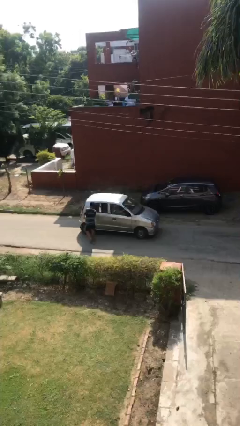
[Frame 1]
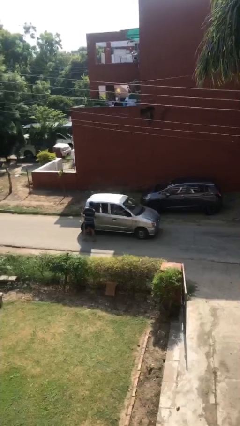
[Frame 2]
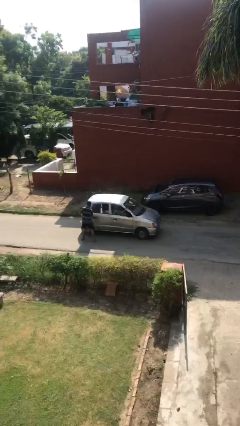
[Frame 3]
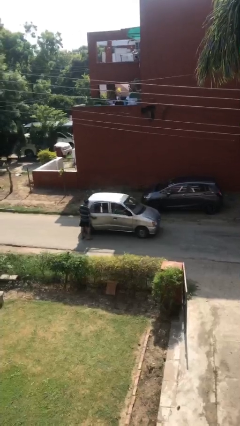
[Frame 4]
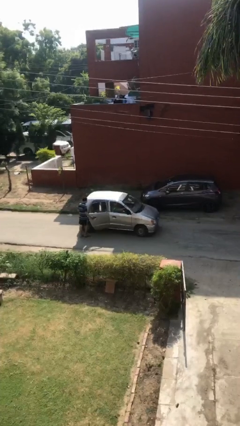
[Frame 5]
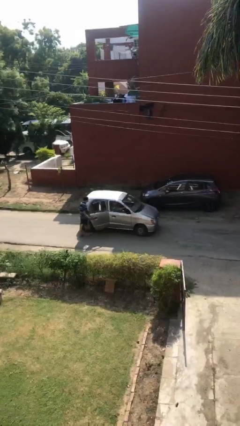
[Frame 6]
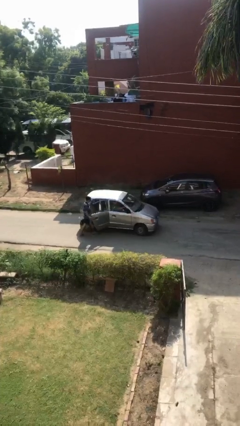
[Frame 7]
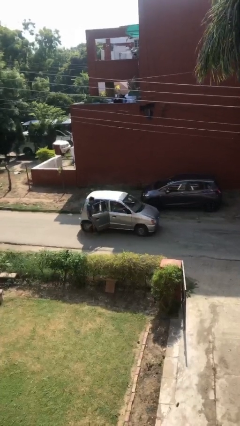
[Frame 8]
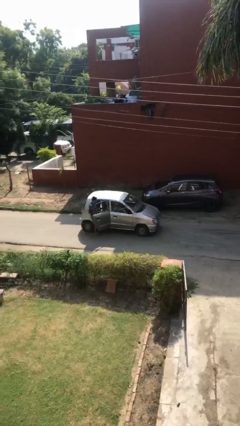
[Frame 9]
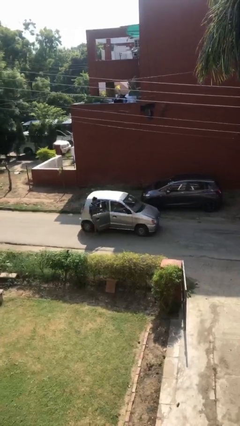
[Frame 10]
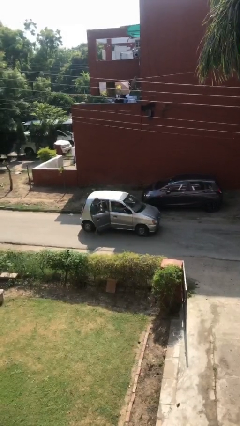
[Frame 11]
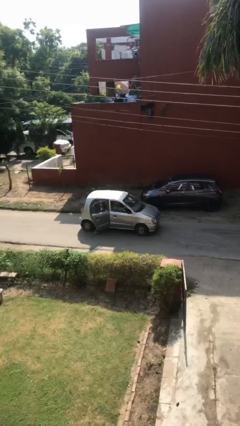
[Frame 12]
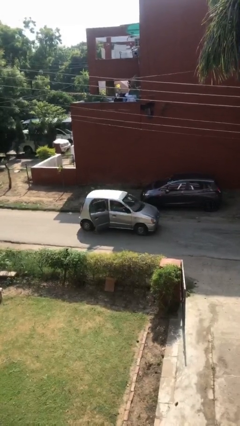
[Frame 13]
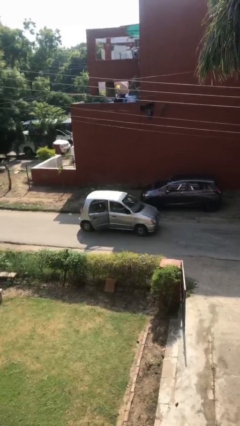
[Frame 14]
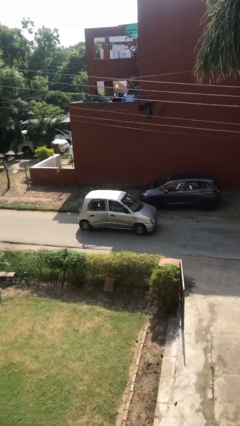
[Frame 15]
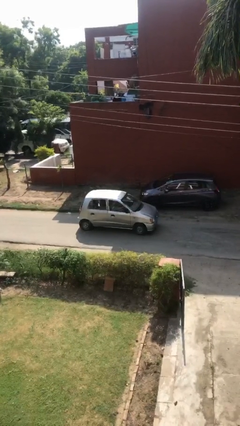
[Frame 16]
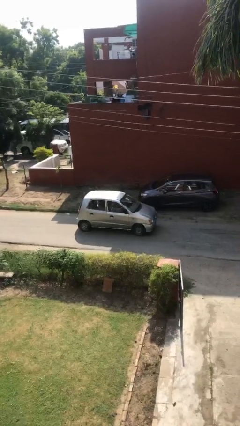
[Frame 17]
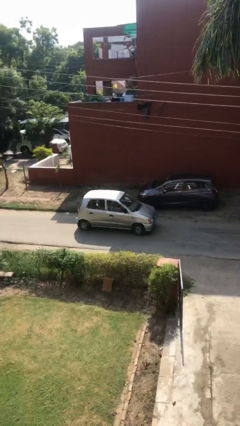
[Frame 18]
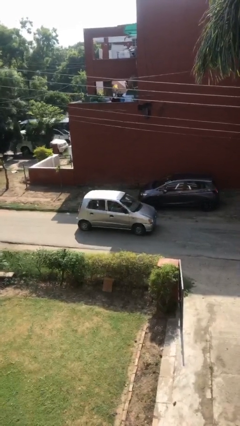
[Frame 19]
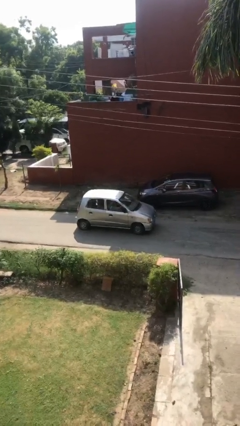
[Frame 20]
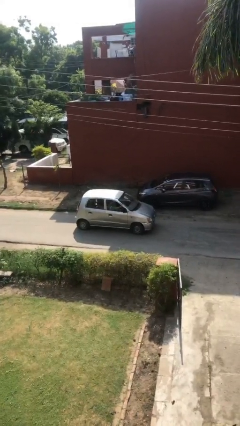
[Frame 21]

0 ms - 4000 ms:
car picks up person

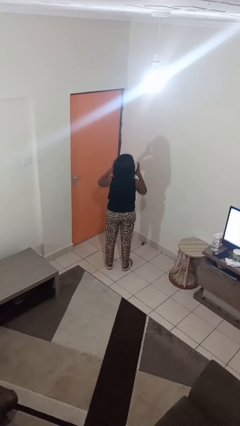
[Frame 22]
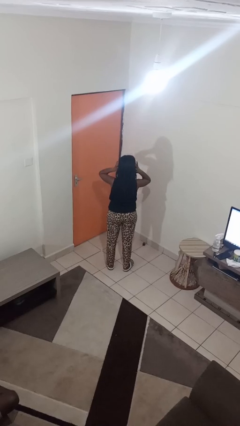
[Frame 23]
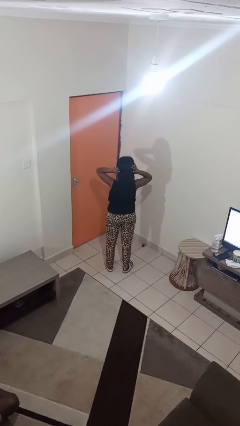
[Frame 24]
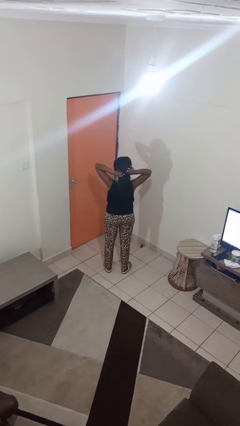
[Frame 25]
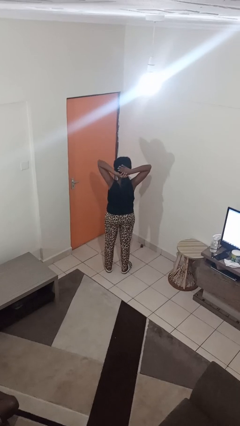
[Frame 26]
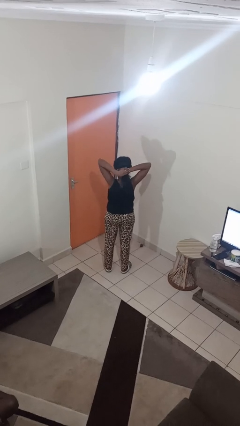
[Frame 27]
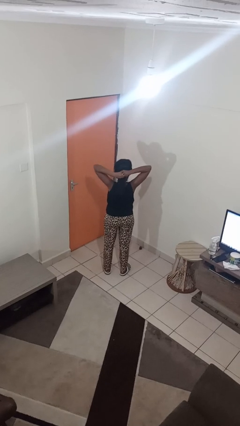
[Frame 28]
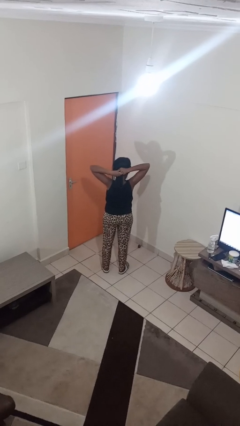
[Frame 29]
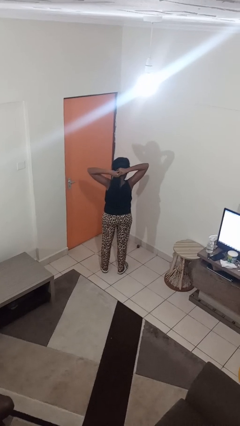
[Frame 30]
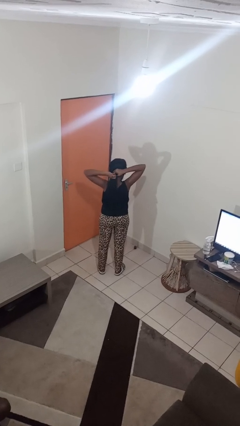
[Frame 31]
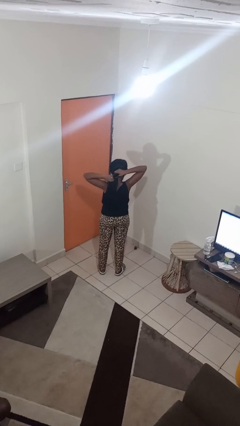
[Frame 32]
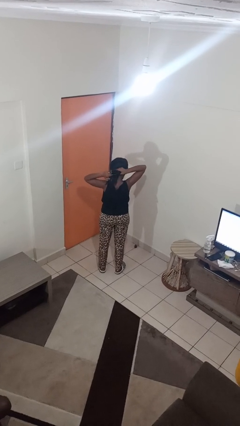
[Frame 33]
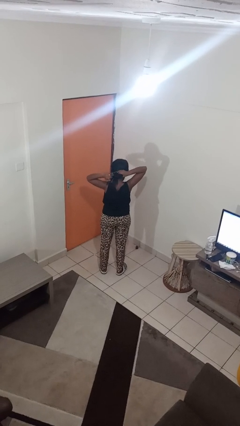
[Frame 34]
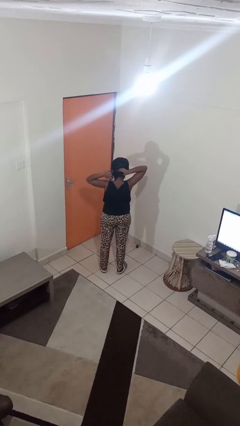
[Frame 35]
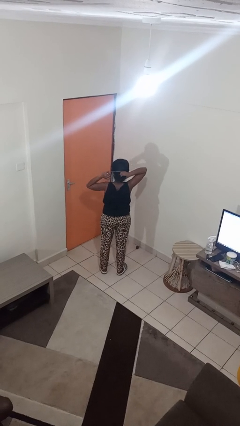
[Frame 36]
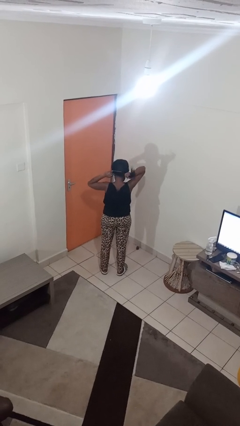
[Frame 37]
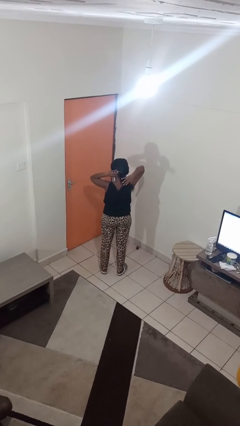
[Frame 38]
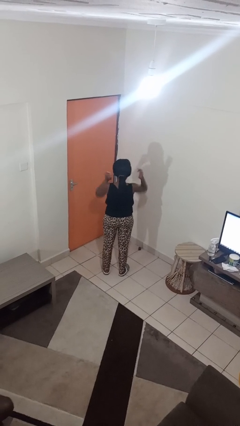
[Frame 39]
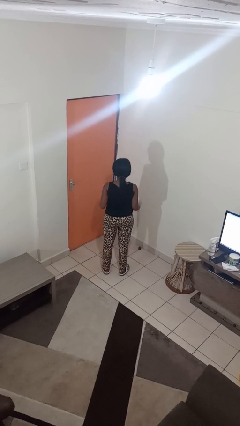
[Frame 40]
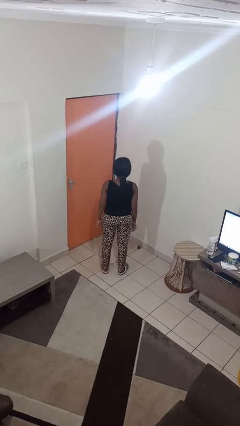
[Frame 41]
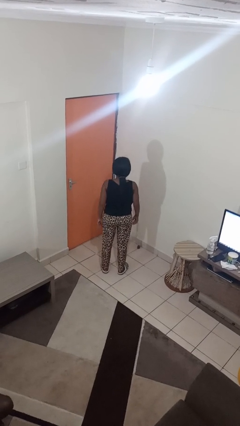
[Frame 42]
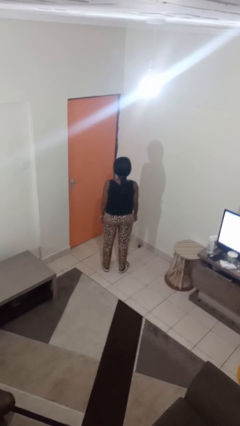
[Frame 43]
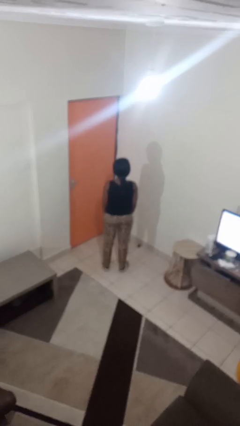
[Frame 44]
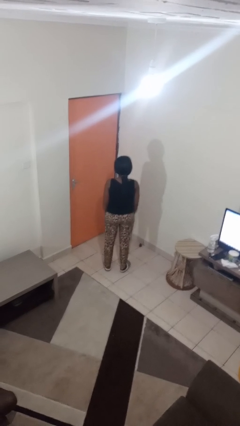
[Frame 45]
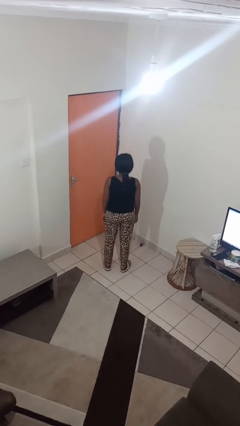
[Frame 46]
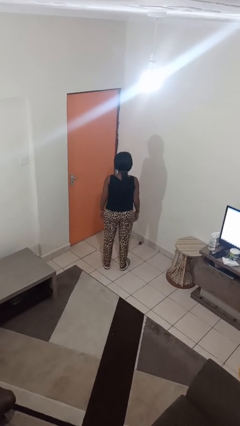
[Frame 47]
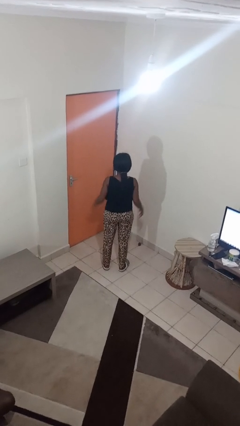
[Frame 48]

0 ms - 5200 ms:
person puts hair in ponytail

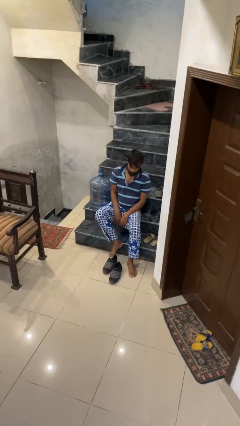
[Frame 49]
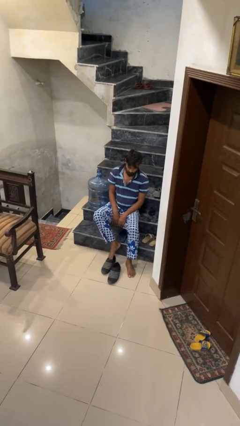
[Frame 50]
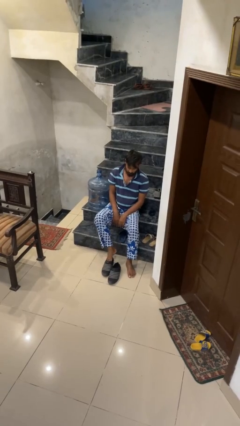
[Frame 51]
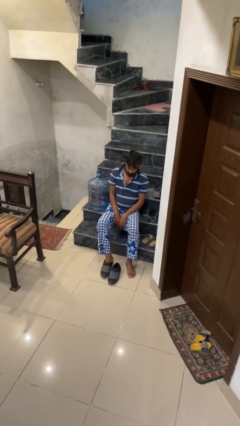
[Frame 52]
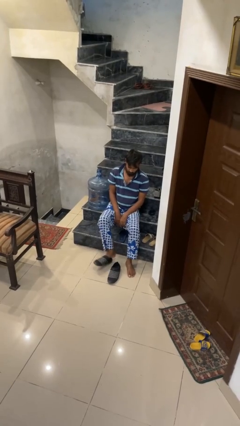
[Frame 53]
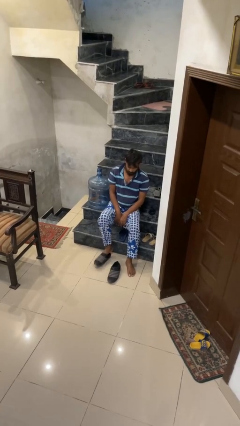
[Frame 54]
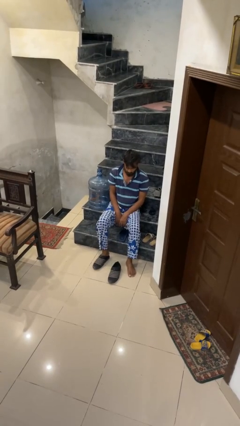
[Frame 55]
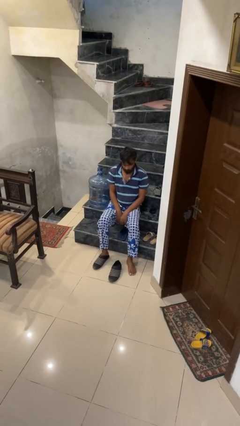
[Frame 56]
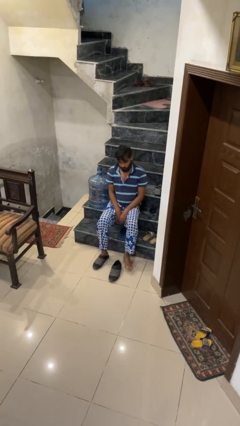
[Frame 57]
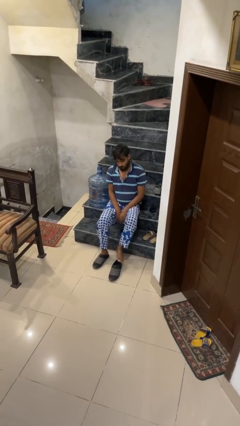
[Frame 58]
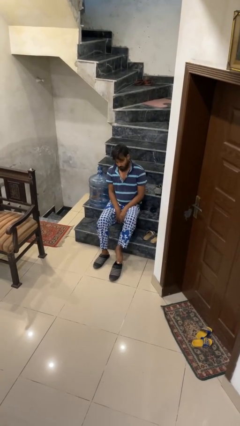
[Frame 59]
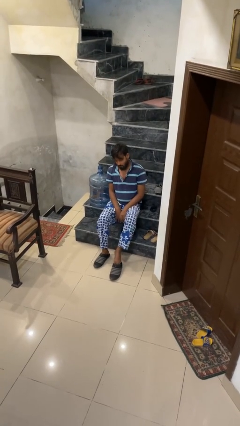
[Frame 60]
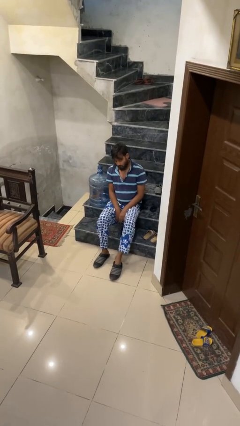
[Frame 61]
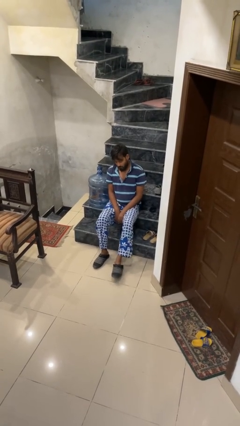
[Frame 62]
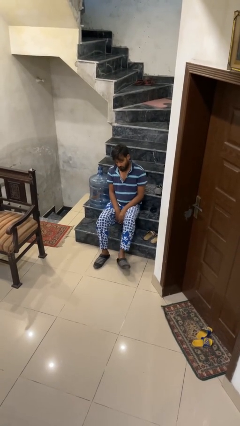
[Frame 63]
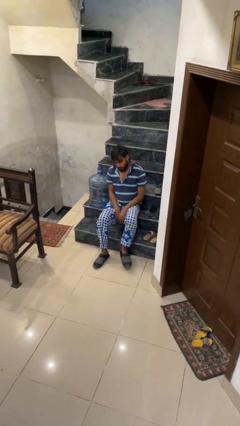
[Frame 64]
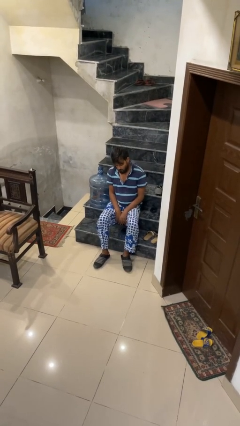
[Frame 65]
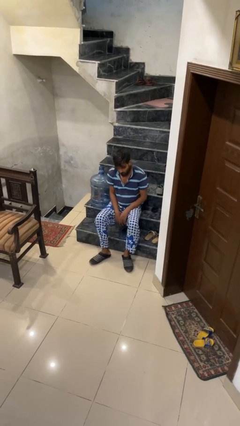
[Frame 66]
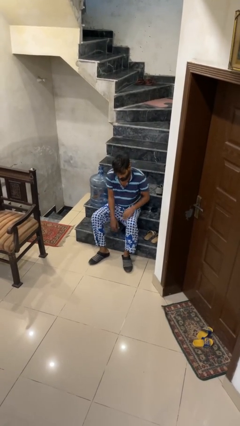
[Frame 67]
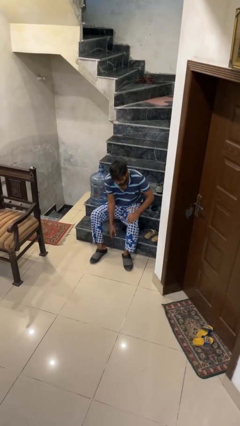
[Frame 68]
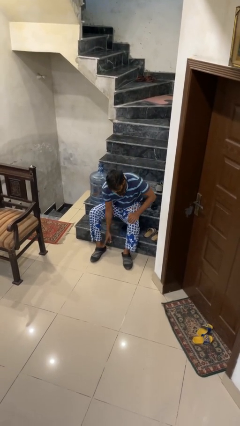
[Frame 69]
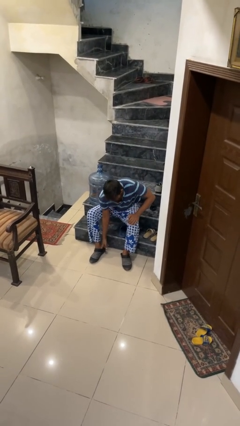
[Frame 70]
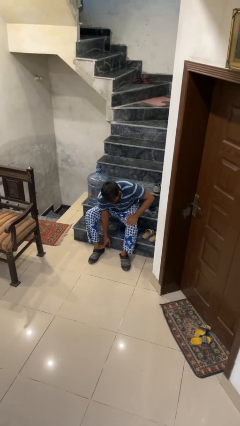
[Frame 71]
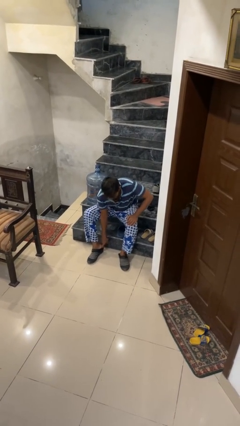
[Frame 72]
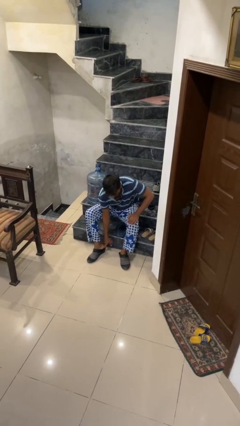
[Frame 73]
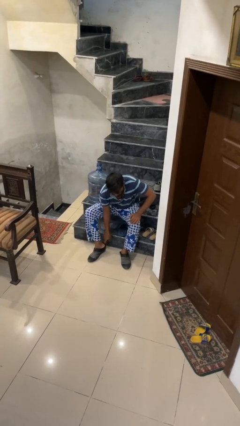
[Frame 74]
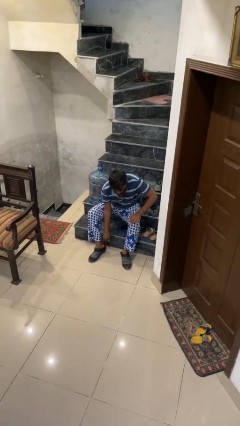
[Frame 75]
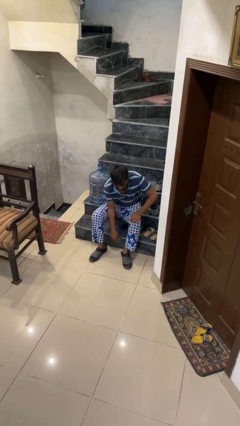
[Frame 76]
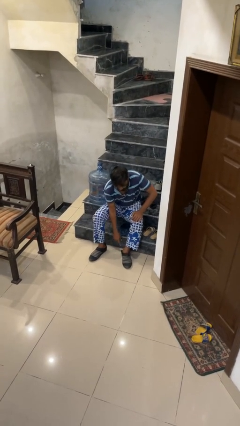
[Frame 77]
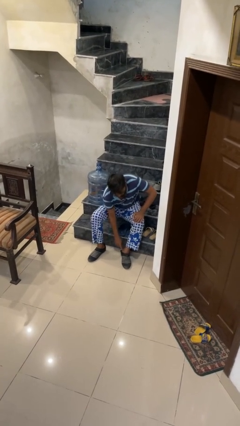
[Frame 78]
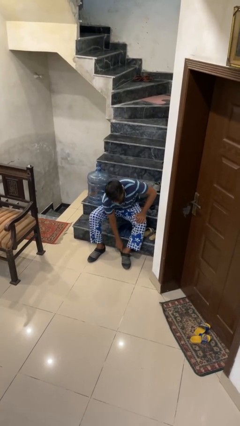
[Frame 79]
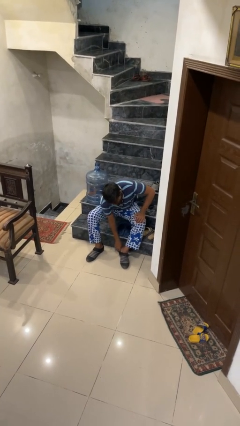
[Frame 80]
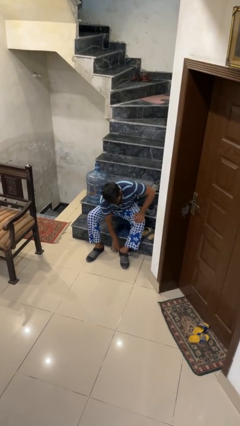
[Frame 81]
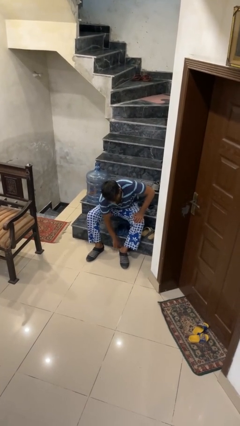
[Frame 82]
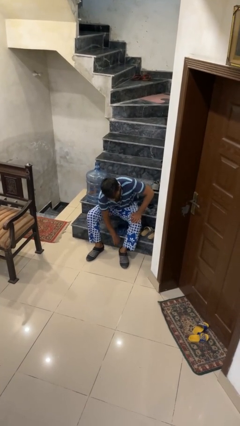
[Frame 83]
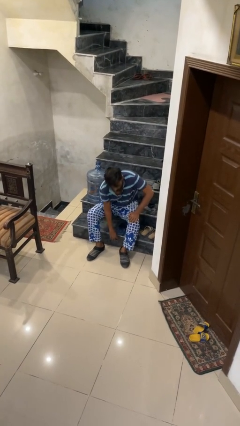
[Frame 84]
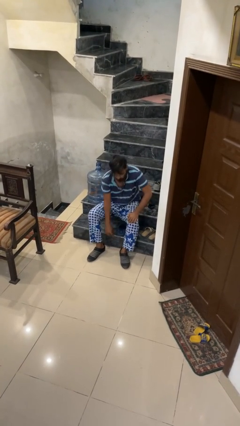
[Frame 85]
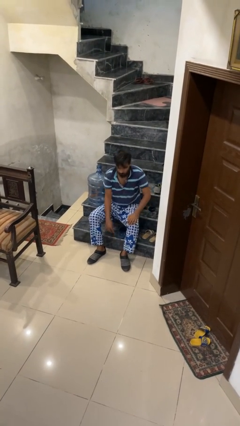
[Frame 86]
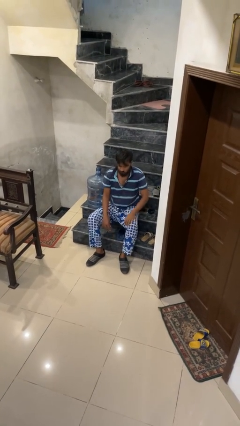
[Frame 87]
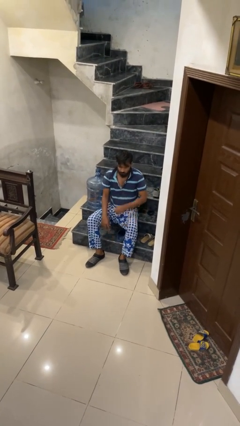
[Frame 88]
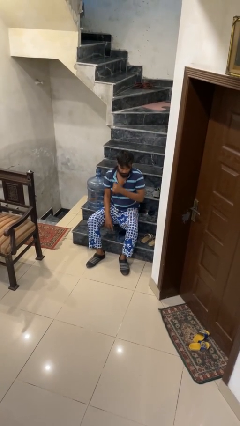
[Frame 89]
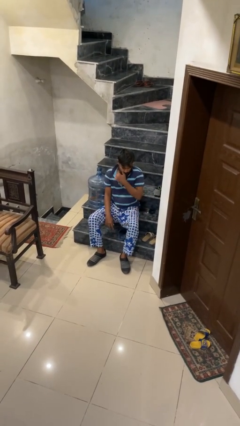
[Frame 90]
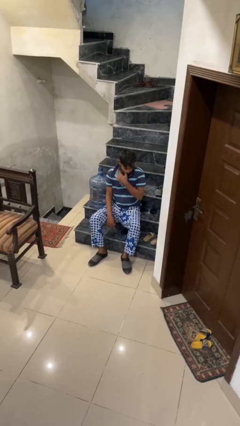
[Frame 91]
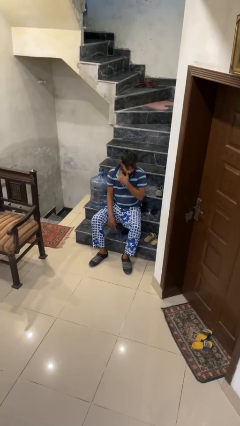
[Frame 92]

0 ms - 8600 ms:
person puts on shoes
